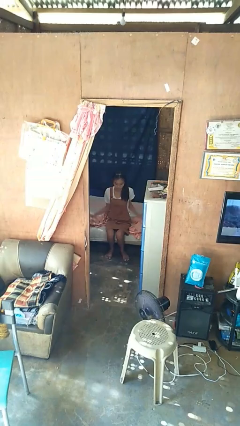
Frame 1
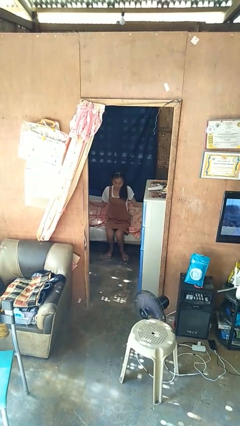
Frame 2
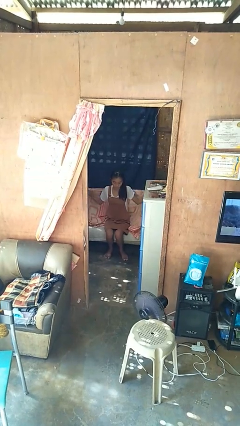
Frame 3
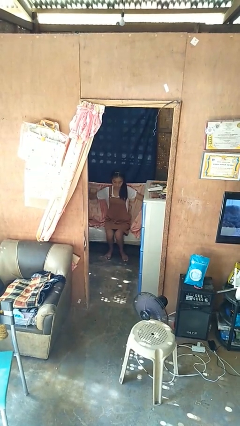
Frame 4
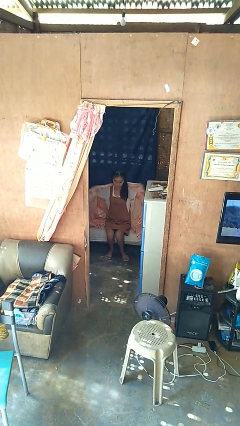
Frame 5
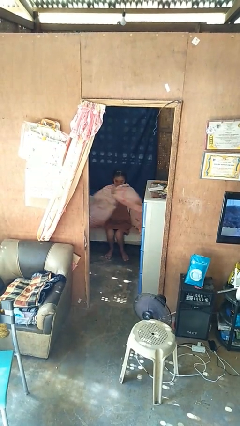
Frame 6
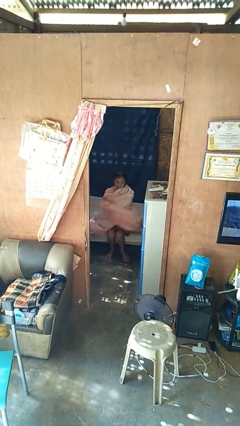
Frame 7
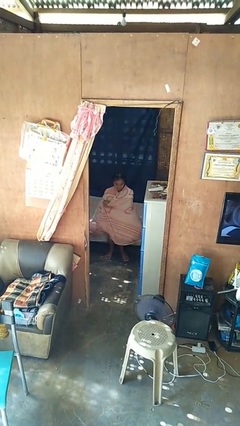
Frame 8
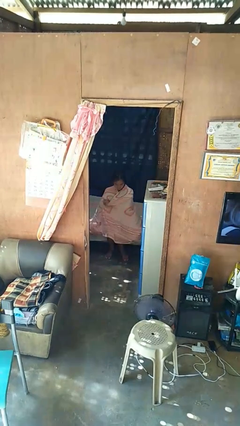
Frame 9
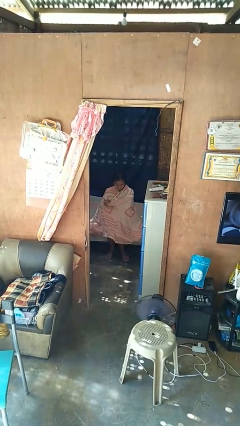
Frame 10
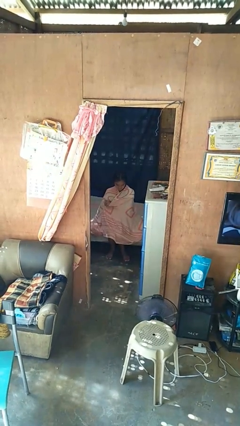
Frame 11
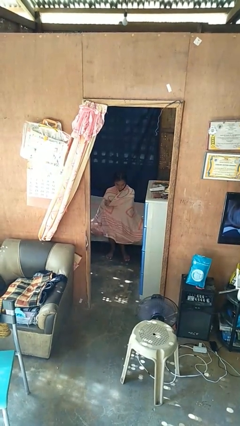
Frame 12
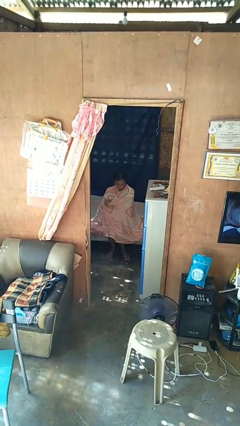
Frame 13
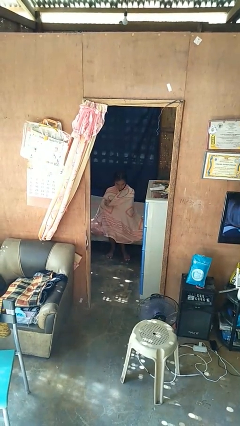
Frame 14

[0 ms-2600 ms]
person covers with blanket

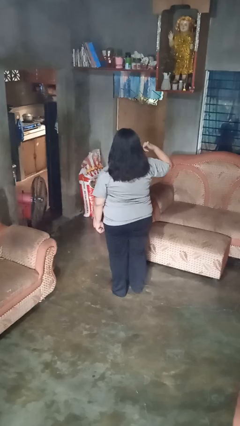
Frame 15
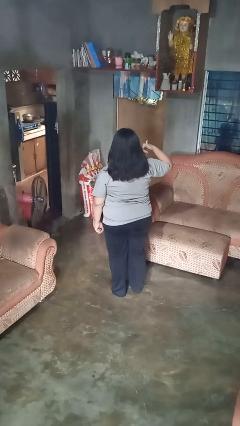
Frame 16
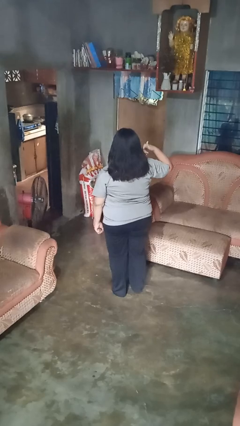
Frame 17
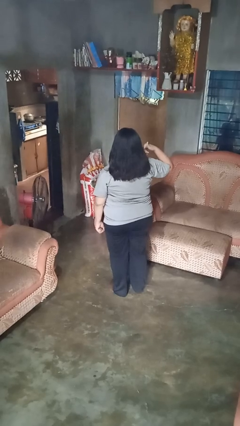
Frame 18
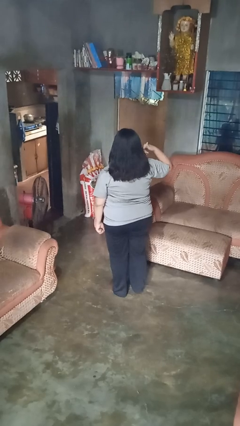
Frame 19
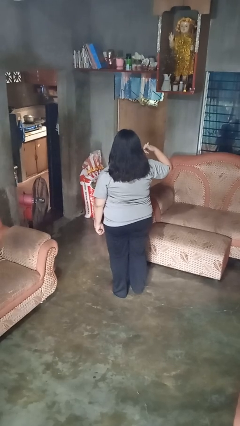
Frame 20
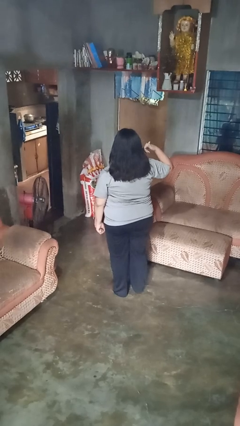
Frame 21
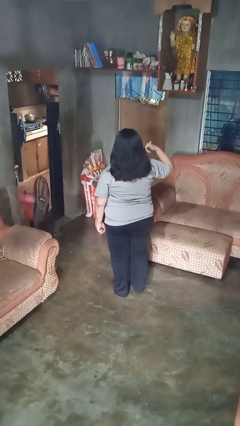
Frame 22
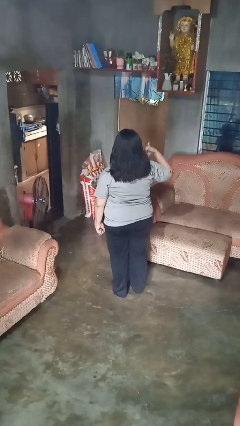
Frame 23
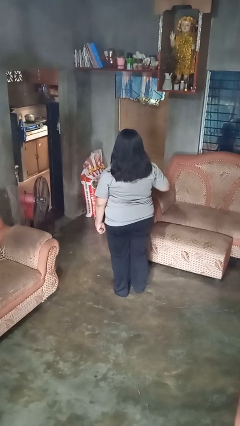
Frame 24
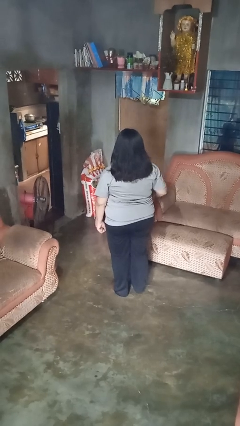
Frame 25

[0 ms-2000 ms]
person gestures call me

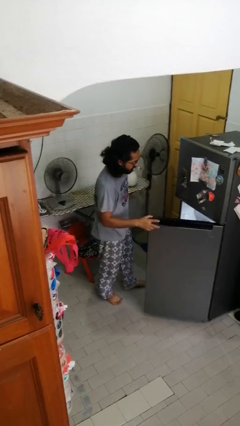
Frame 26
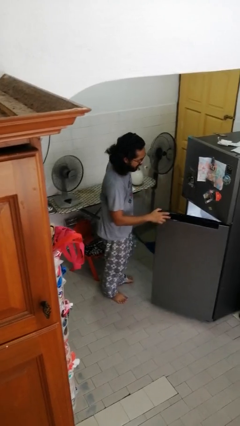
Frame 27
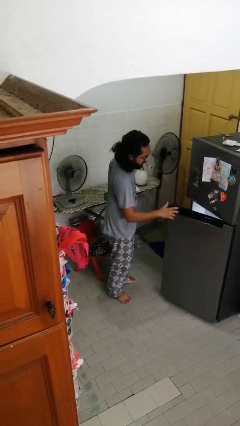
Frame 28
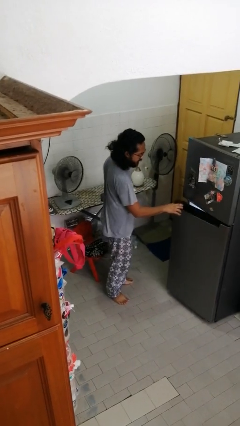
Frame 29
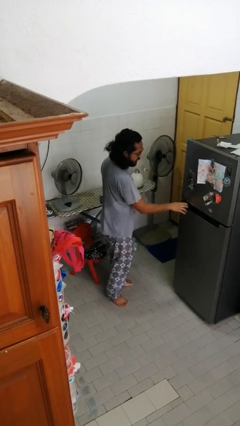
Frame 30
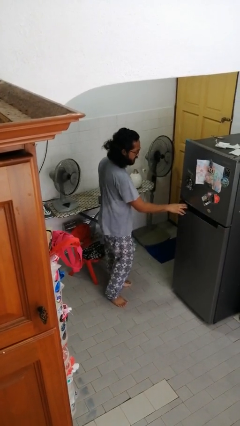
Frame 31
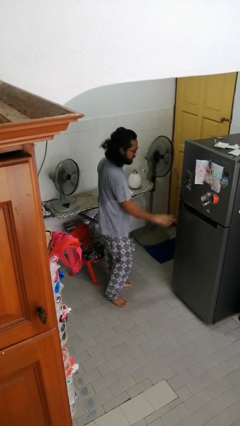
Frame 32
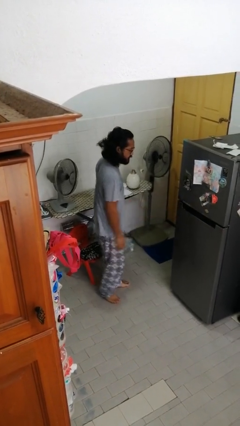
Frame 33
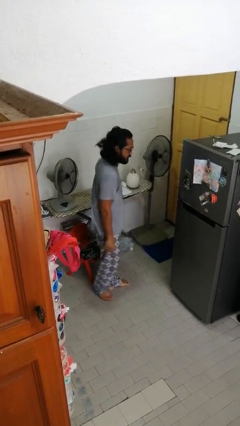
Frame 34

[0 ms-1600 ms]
person closes refrigerator

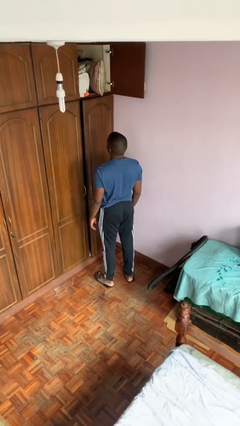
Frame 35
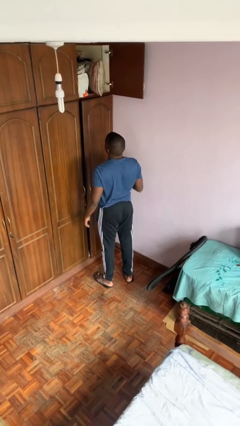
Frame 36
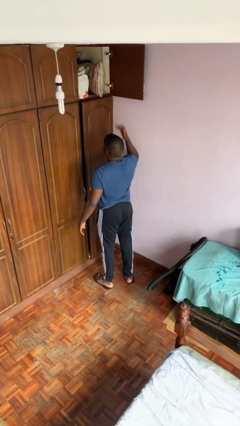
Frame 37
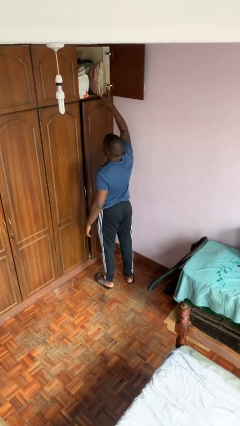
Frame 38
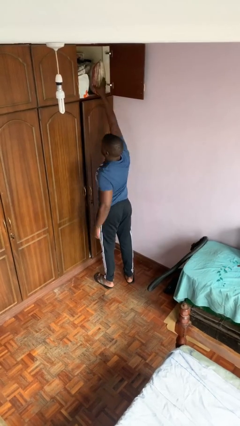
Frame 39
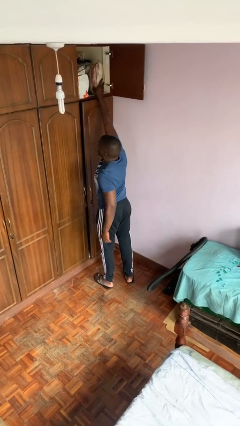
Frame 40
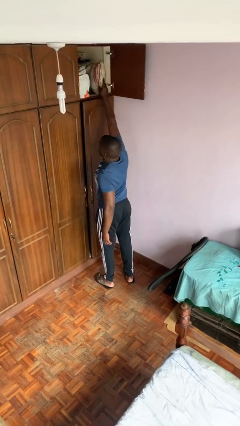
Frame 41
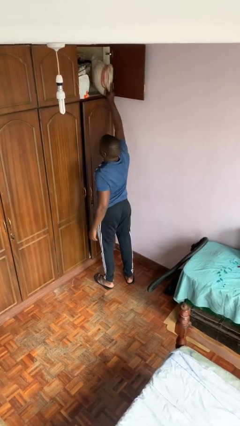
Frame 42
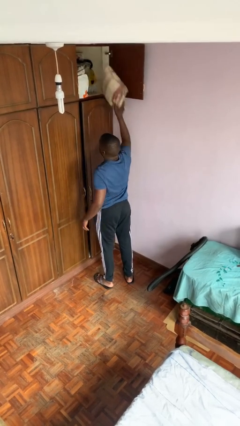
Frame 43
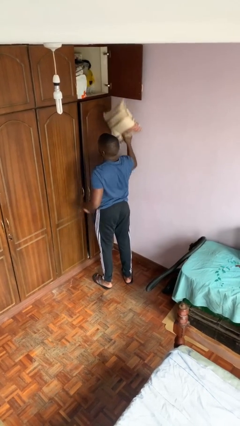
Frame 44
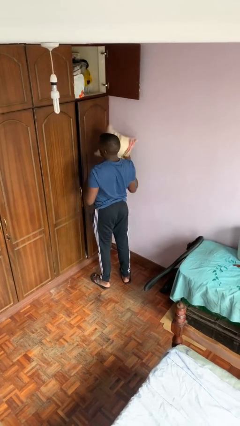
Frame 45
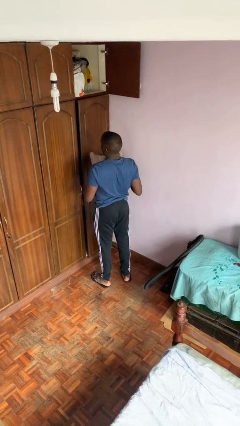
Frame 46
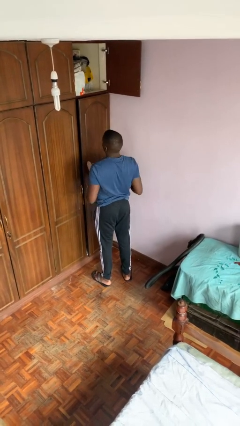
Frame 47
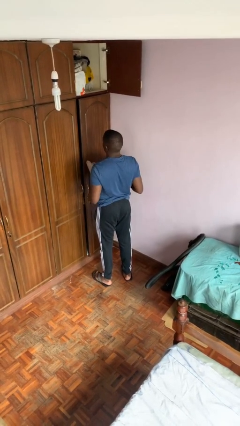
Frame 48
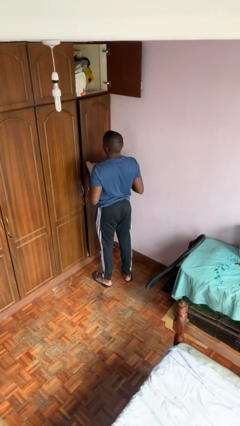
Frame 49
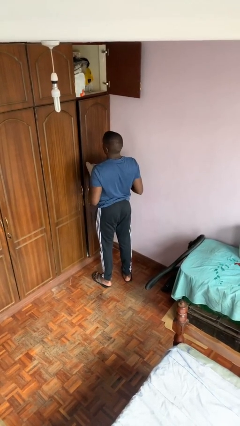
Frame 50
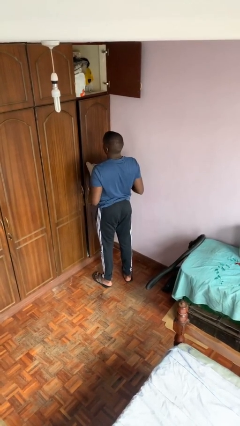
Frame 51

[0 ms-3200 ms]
person picks up object from shelf

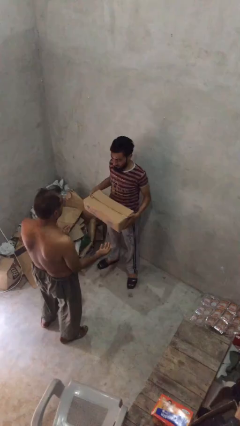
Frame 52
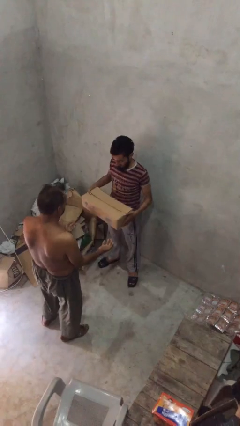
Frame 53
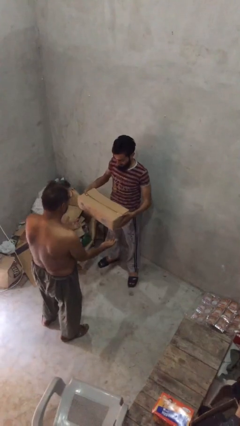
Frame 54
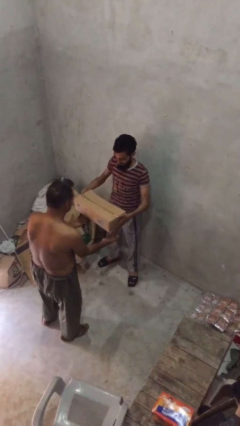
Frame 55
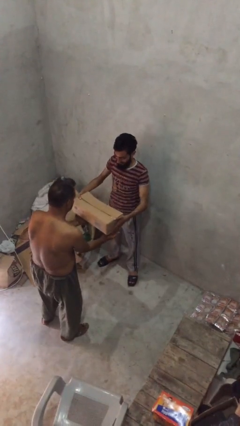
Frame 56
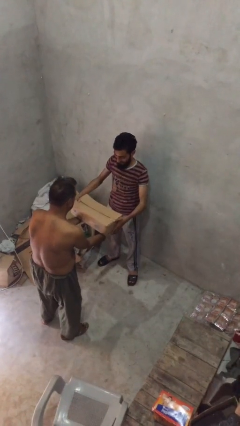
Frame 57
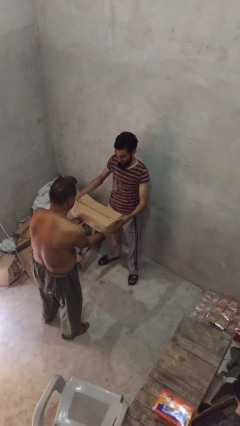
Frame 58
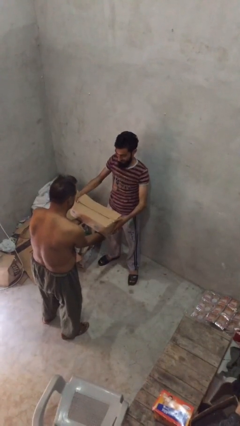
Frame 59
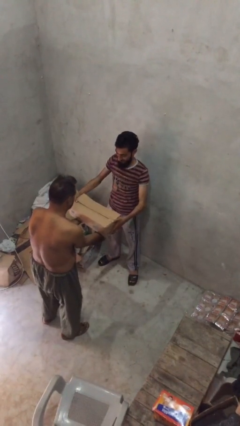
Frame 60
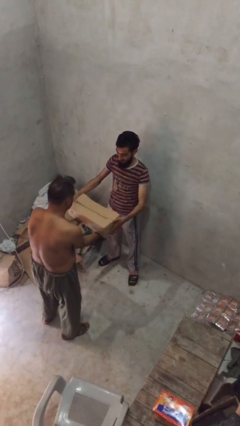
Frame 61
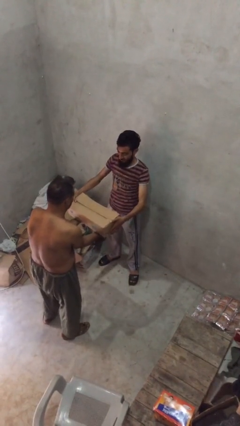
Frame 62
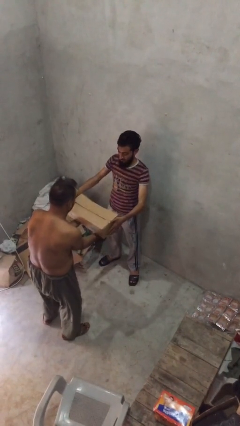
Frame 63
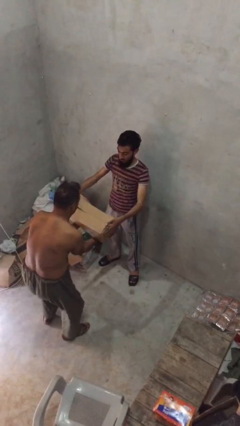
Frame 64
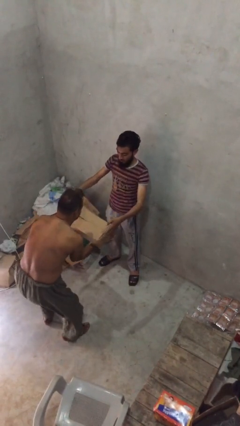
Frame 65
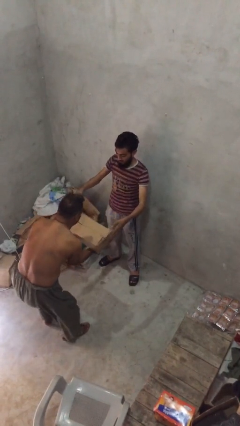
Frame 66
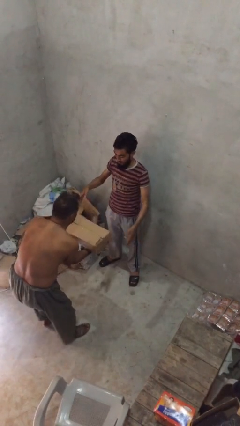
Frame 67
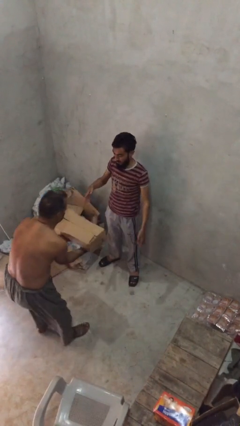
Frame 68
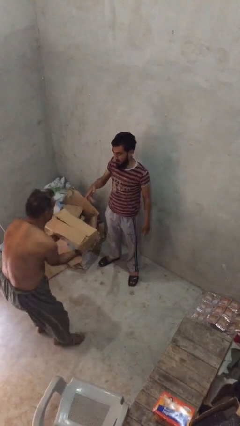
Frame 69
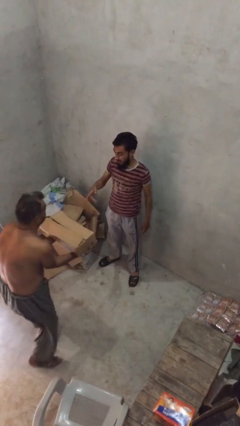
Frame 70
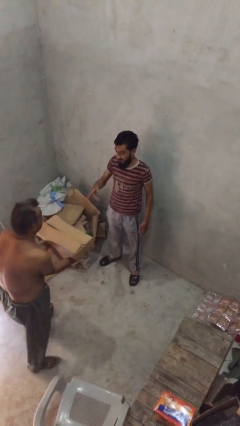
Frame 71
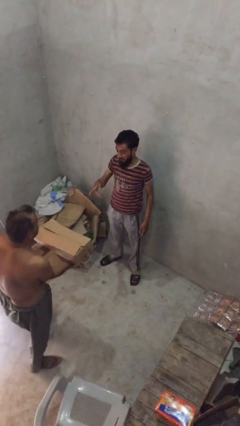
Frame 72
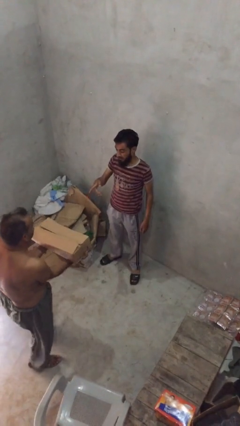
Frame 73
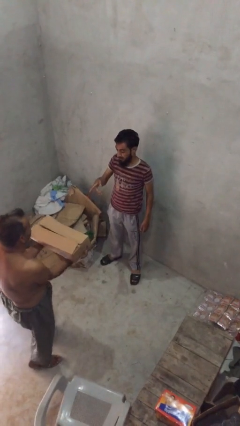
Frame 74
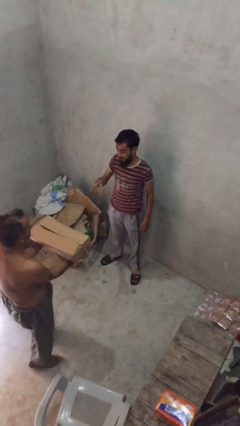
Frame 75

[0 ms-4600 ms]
person transfers object to person

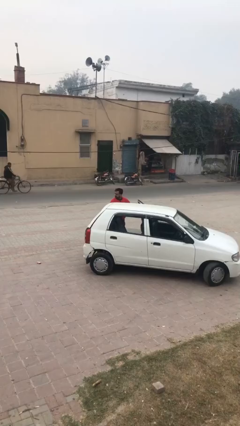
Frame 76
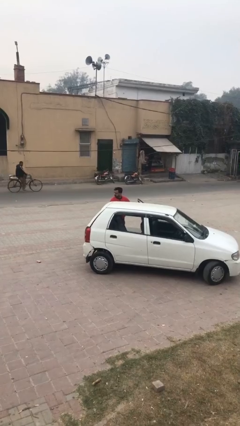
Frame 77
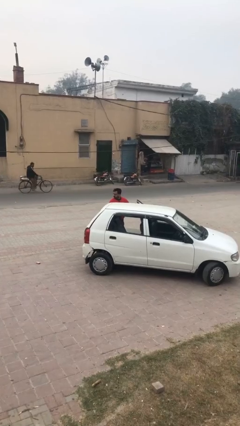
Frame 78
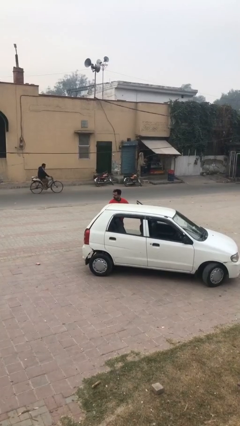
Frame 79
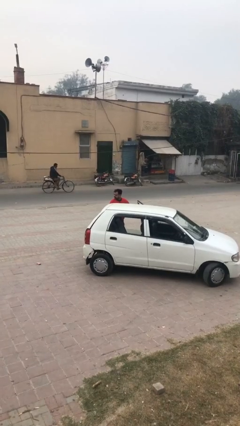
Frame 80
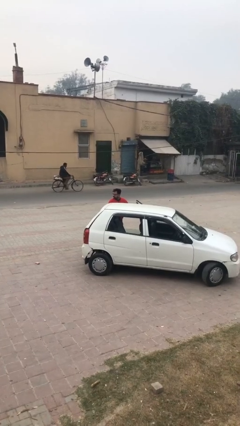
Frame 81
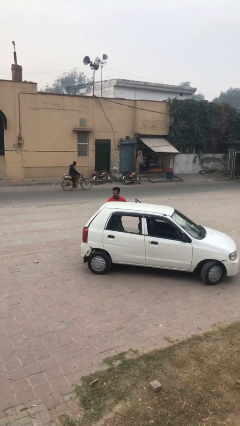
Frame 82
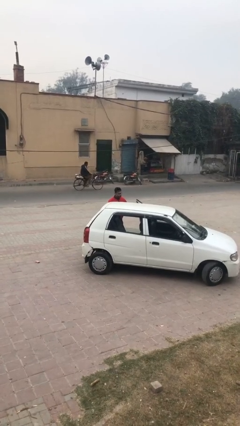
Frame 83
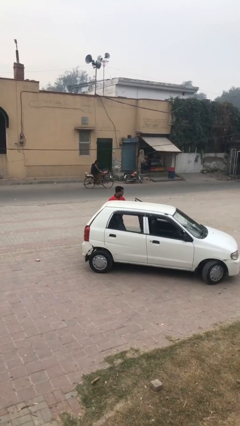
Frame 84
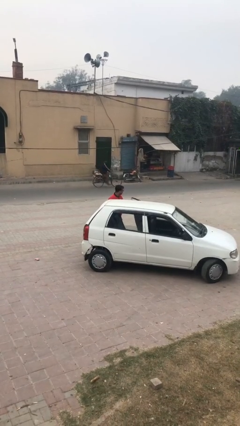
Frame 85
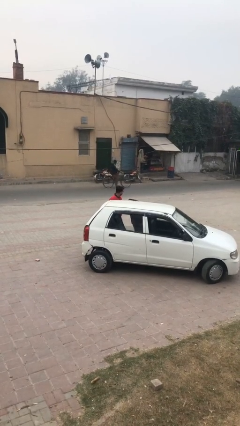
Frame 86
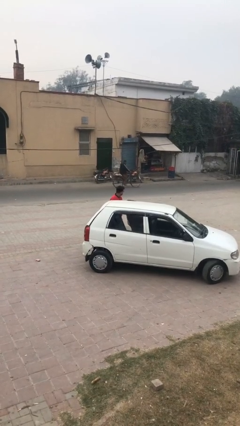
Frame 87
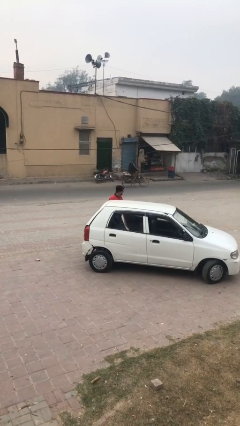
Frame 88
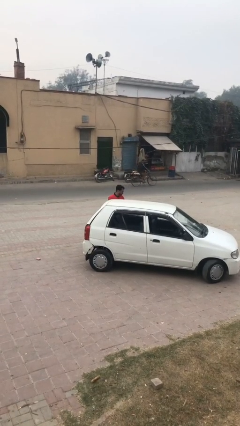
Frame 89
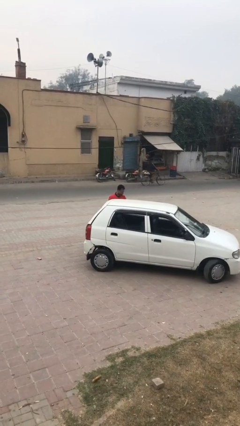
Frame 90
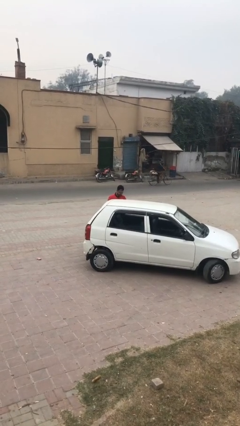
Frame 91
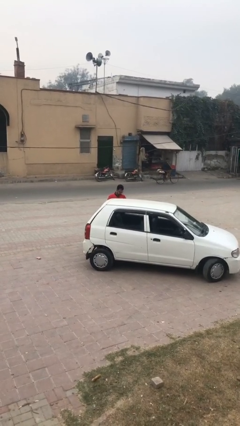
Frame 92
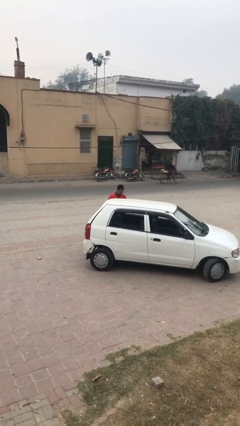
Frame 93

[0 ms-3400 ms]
person closes car door

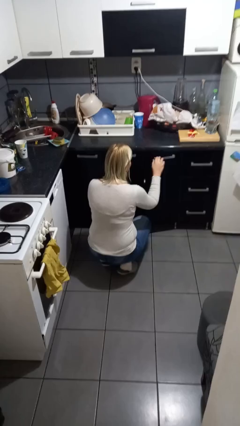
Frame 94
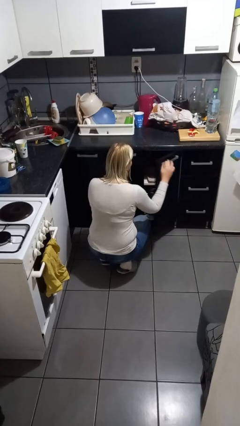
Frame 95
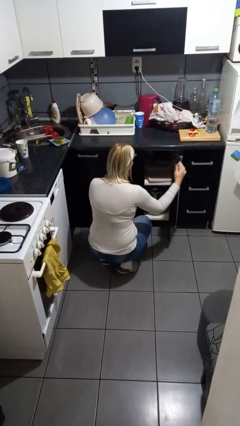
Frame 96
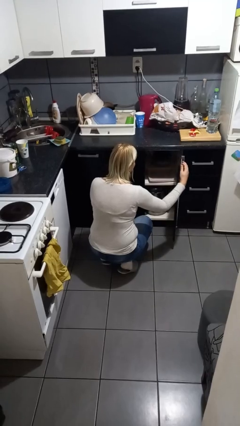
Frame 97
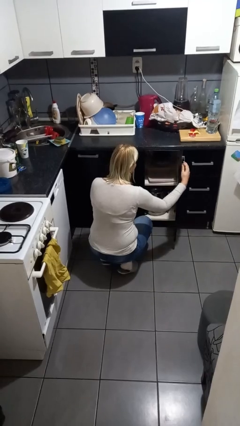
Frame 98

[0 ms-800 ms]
person opens cabinet
